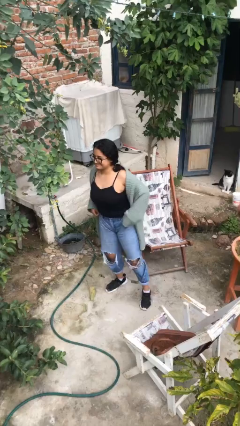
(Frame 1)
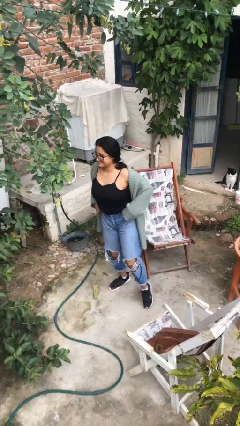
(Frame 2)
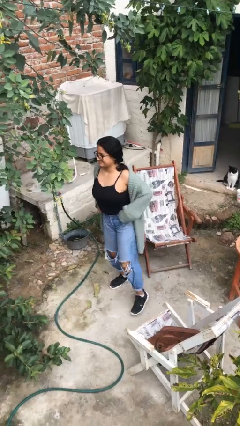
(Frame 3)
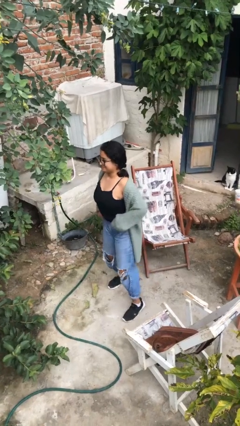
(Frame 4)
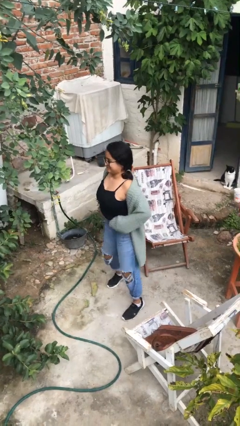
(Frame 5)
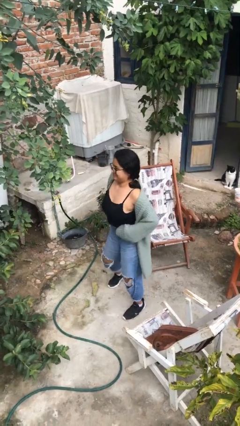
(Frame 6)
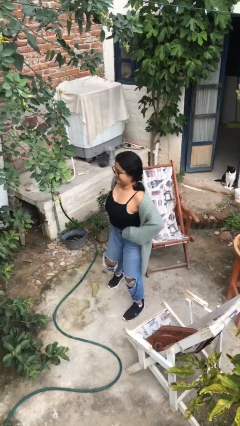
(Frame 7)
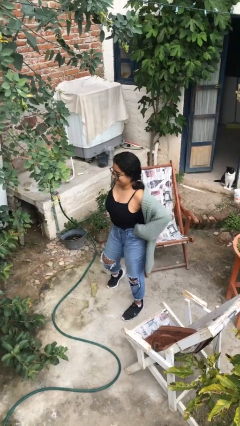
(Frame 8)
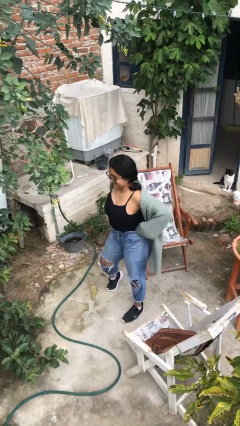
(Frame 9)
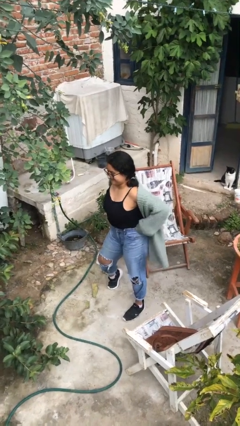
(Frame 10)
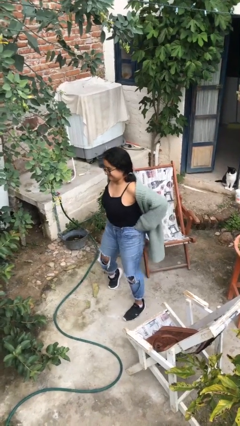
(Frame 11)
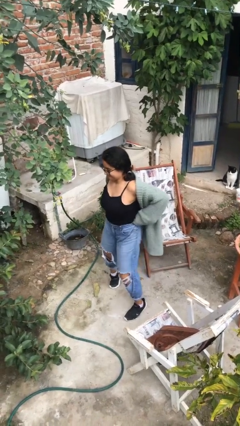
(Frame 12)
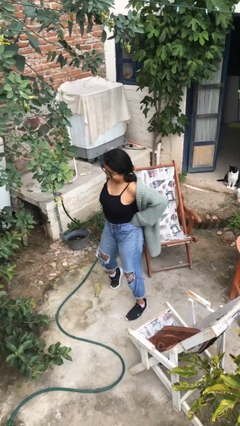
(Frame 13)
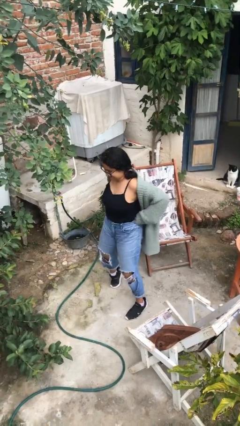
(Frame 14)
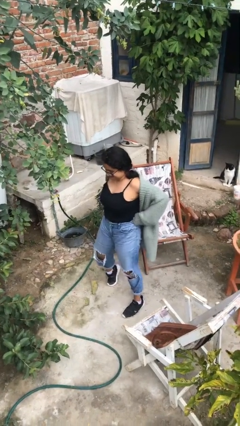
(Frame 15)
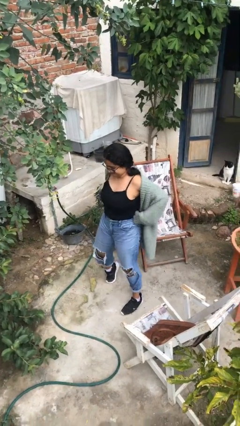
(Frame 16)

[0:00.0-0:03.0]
person hikes up pants

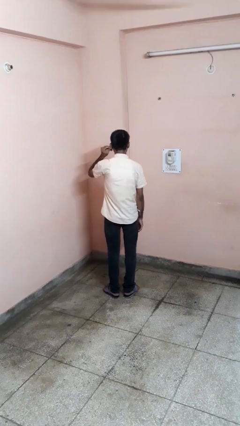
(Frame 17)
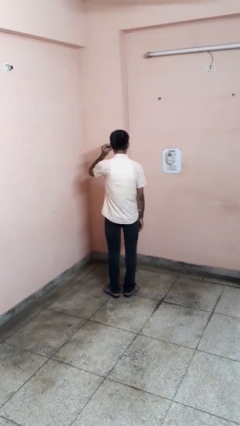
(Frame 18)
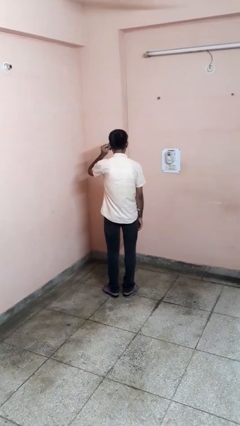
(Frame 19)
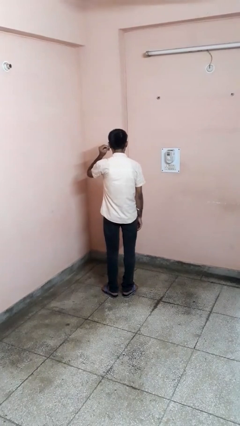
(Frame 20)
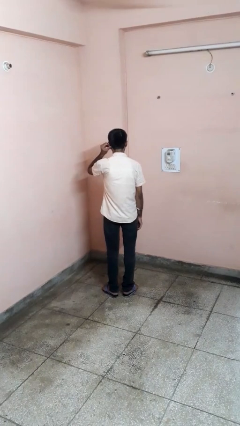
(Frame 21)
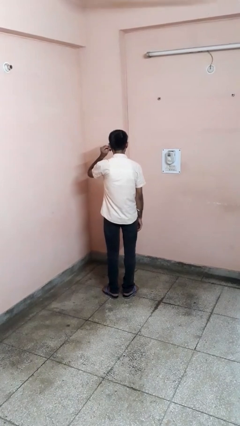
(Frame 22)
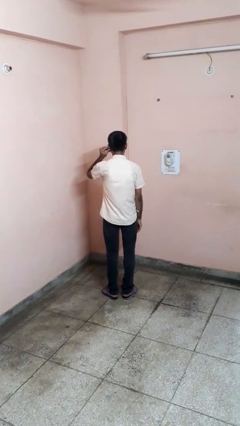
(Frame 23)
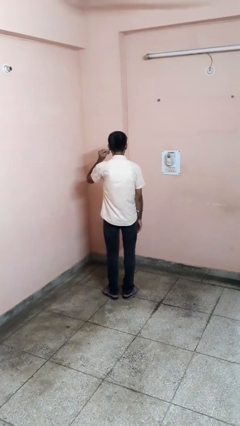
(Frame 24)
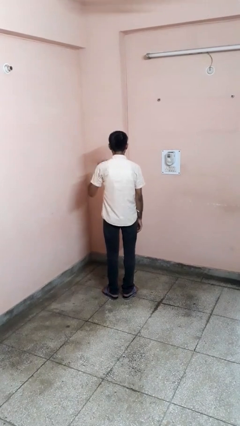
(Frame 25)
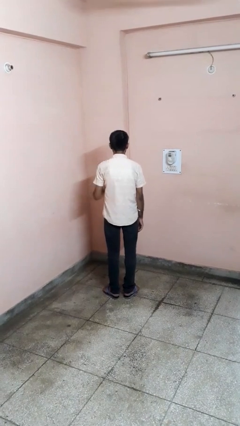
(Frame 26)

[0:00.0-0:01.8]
person touches earlobe

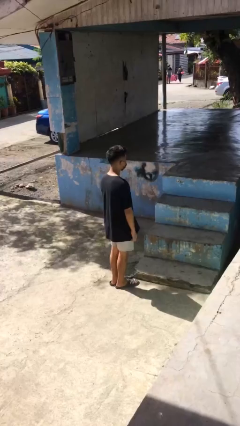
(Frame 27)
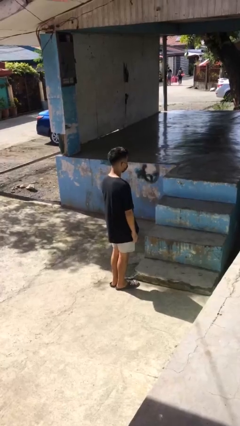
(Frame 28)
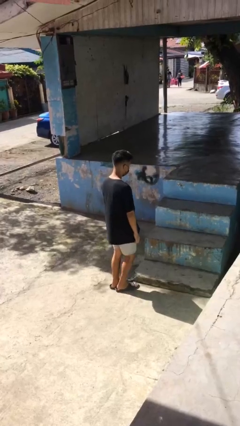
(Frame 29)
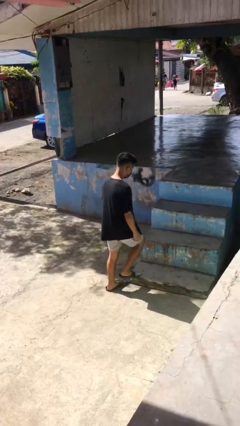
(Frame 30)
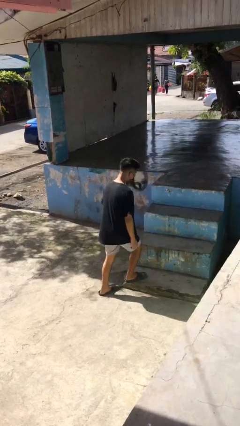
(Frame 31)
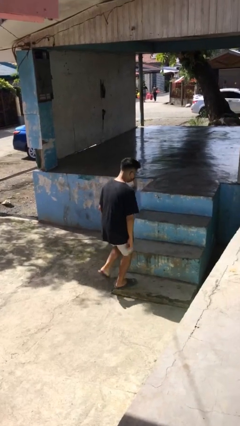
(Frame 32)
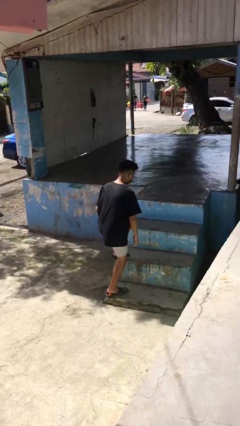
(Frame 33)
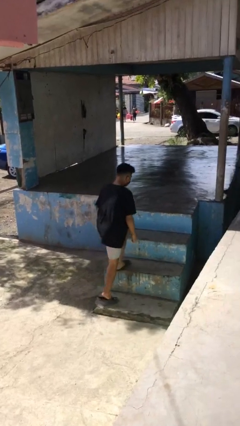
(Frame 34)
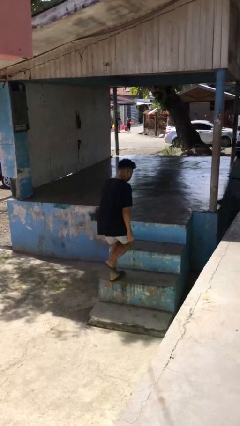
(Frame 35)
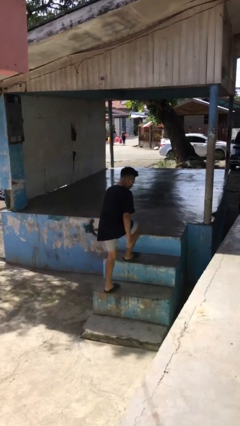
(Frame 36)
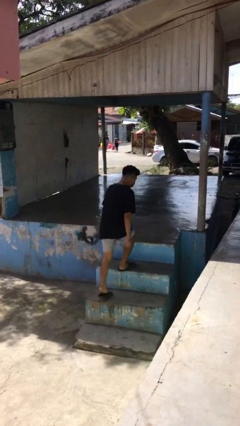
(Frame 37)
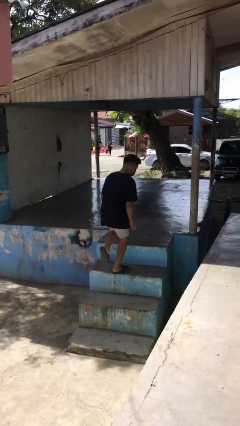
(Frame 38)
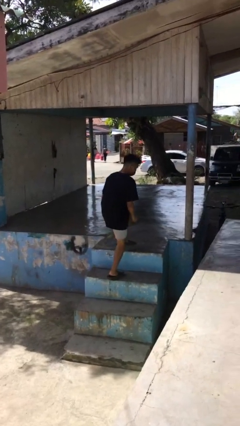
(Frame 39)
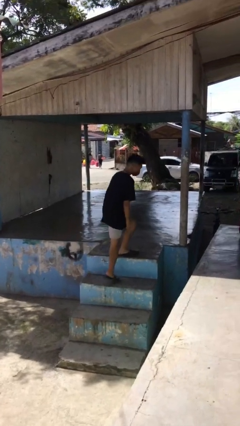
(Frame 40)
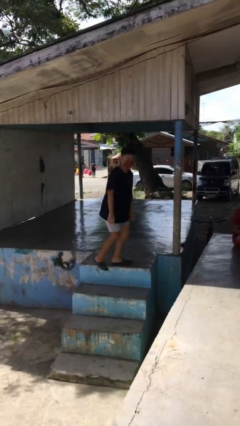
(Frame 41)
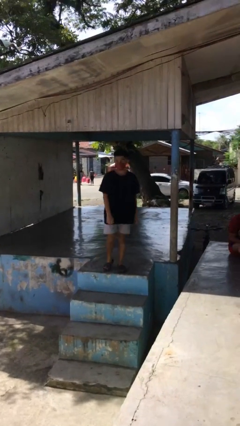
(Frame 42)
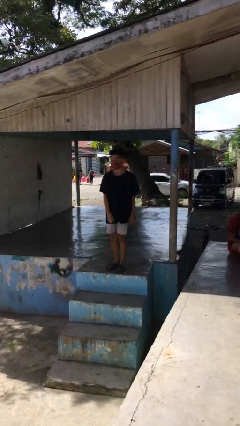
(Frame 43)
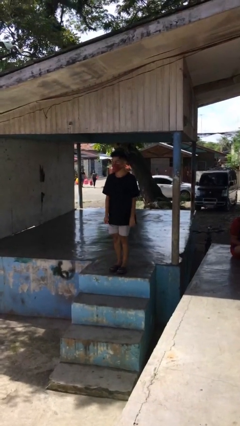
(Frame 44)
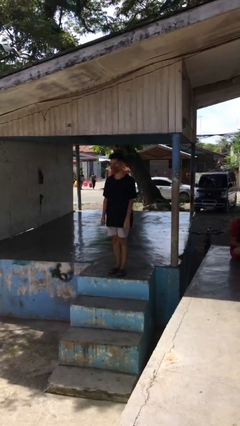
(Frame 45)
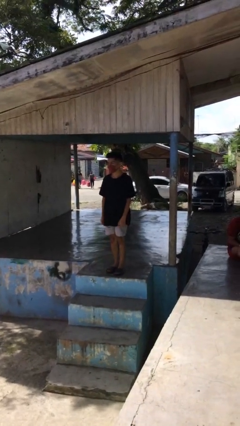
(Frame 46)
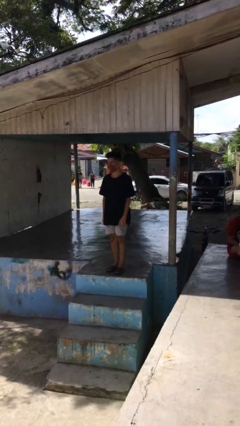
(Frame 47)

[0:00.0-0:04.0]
person climbs up stairs

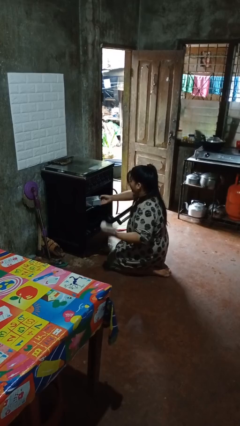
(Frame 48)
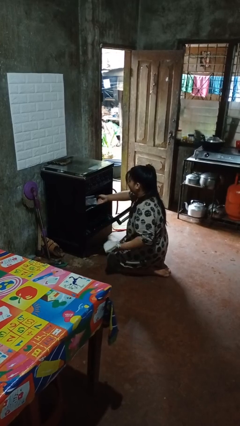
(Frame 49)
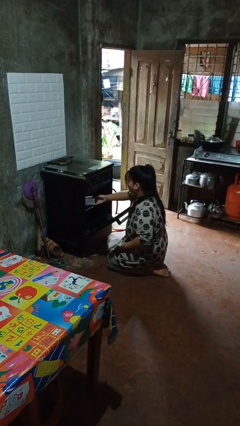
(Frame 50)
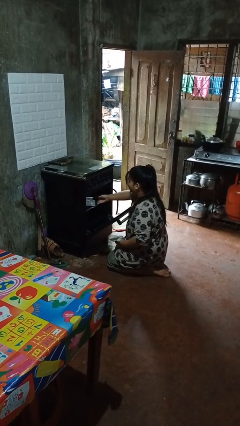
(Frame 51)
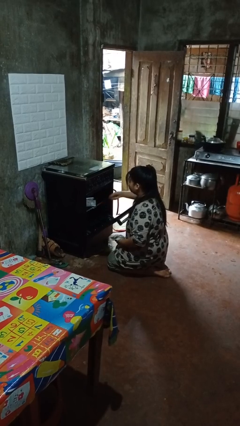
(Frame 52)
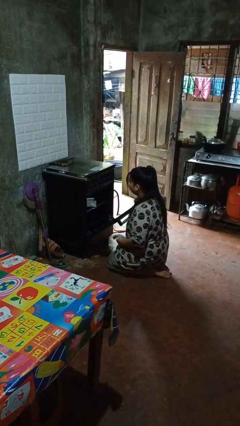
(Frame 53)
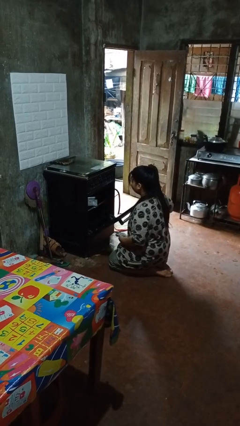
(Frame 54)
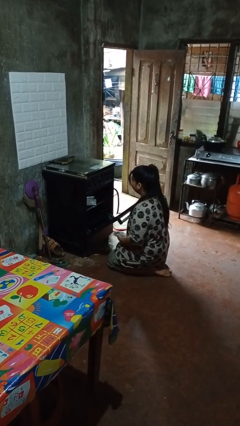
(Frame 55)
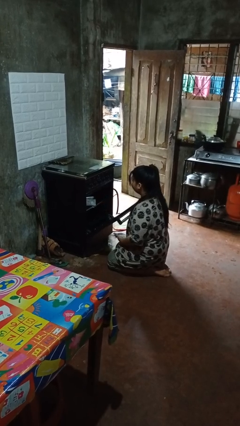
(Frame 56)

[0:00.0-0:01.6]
person puts object into oven

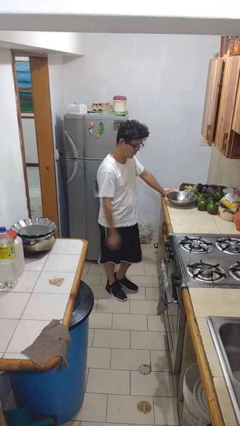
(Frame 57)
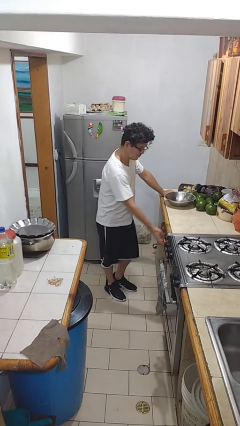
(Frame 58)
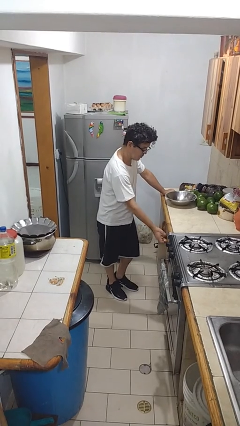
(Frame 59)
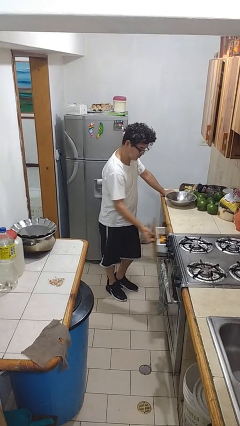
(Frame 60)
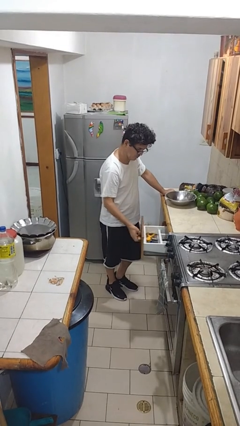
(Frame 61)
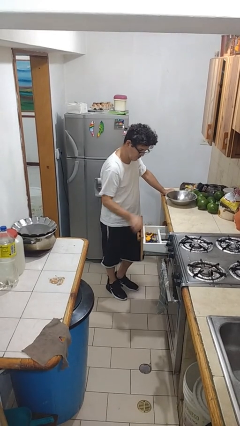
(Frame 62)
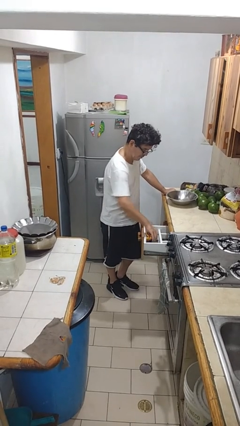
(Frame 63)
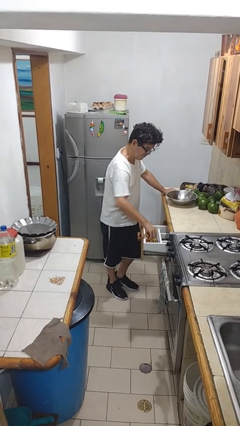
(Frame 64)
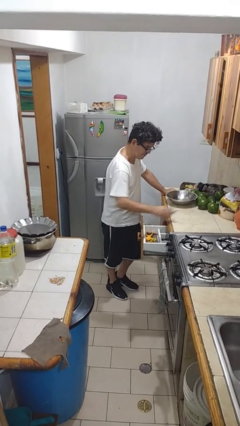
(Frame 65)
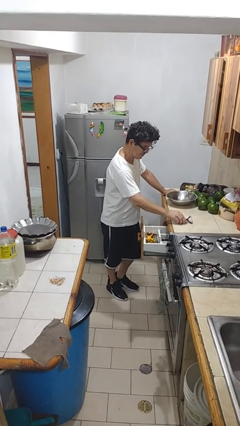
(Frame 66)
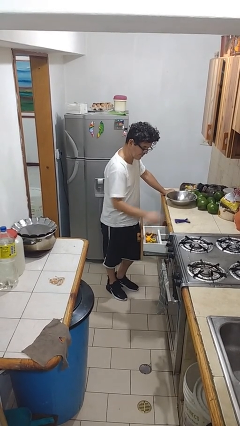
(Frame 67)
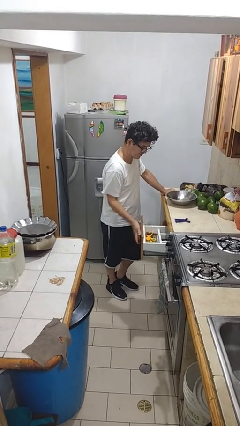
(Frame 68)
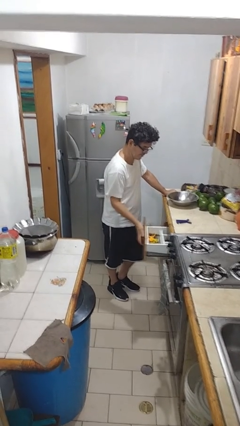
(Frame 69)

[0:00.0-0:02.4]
person takes object from kitchen drawer

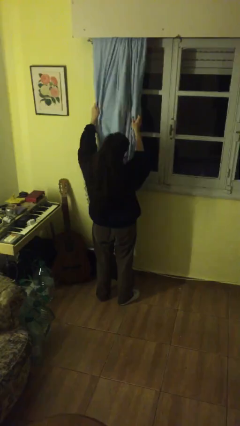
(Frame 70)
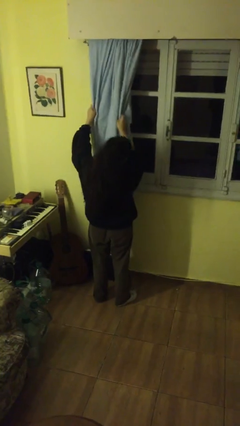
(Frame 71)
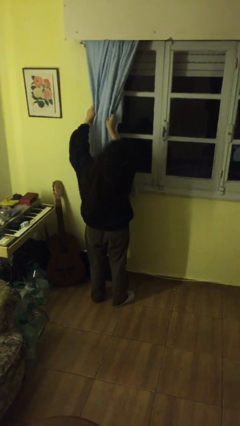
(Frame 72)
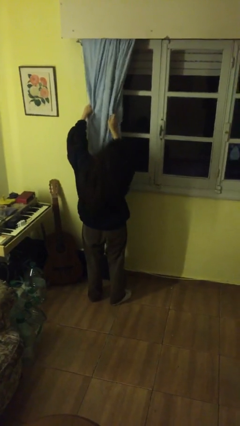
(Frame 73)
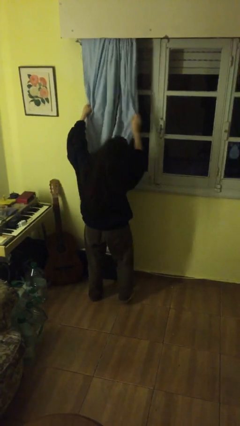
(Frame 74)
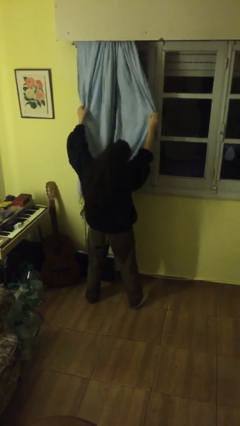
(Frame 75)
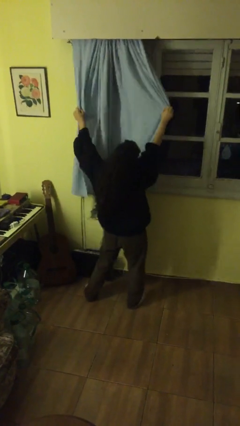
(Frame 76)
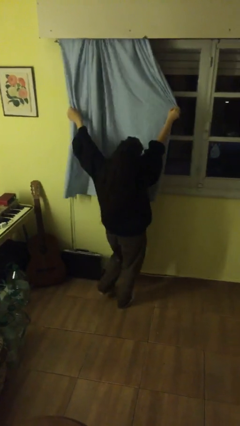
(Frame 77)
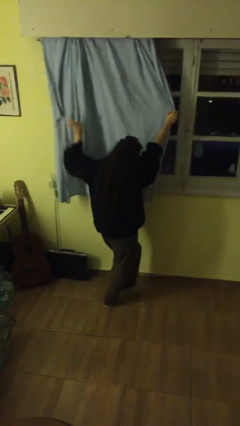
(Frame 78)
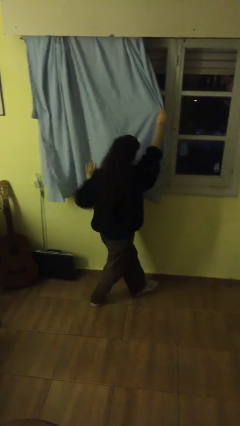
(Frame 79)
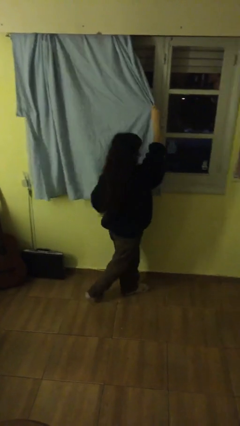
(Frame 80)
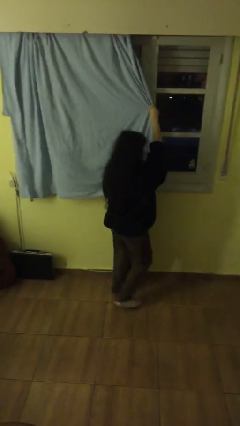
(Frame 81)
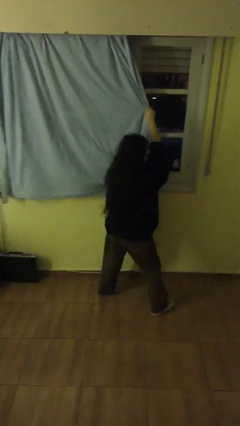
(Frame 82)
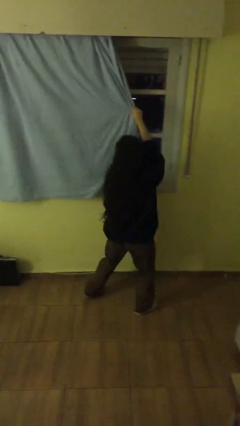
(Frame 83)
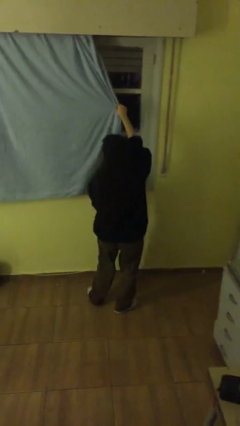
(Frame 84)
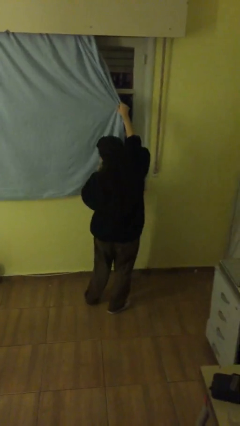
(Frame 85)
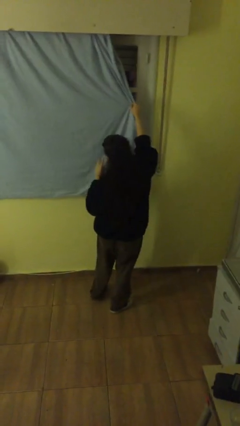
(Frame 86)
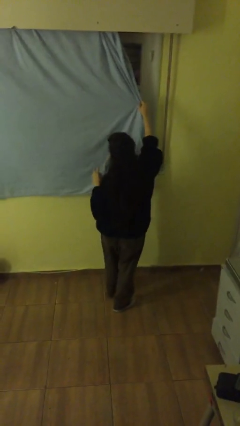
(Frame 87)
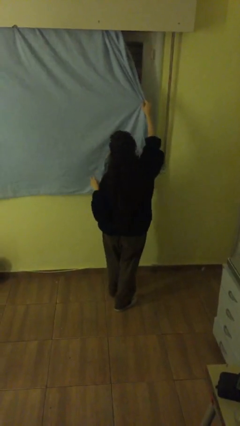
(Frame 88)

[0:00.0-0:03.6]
person closes curtains

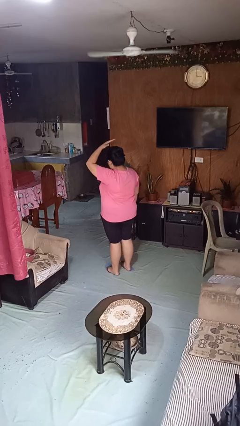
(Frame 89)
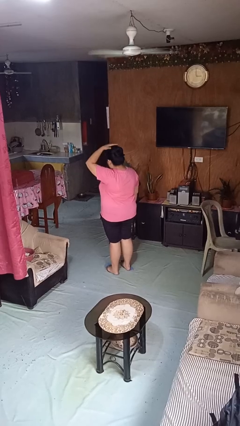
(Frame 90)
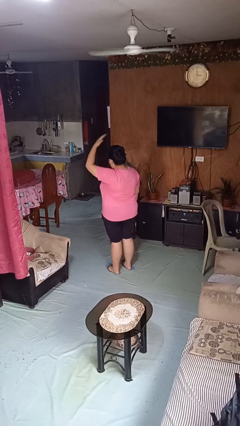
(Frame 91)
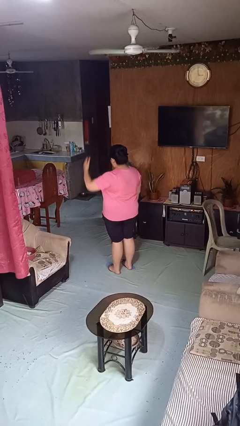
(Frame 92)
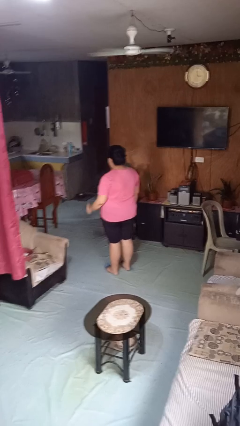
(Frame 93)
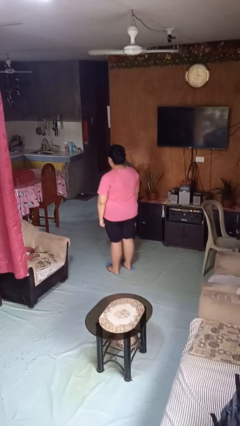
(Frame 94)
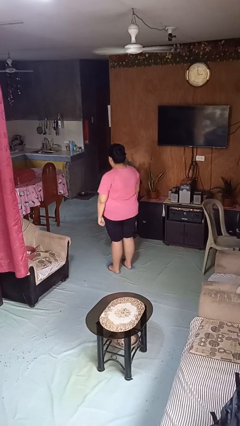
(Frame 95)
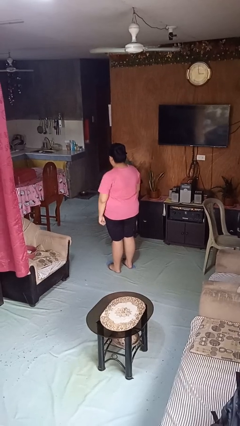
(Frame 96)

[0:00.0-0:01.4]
person pats head
